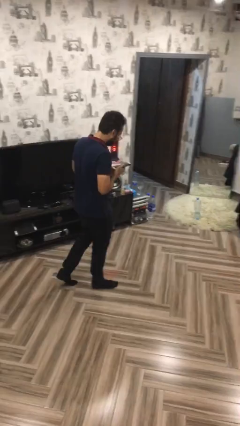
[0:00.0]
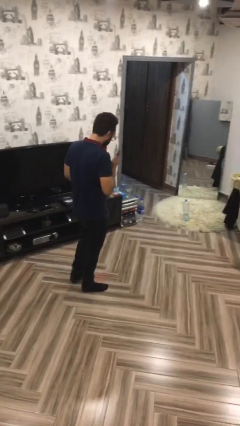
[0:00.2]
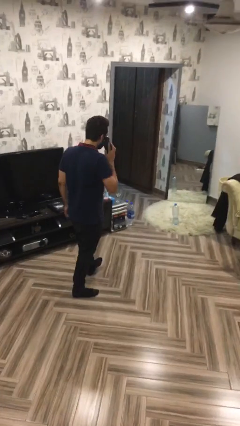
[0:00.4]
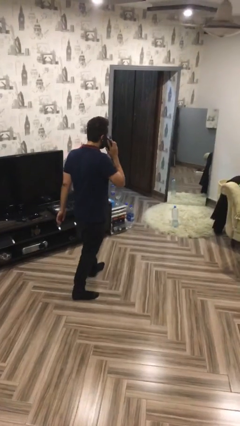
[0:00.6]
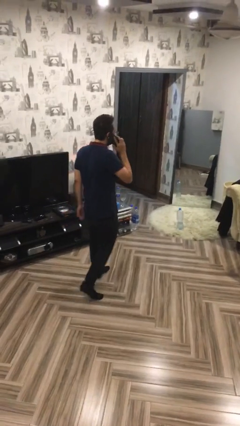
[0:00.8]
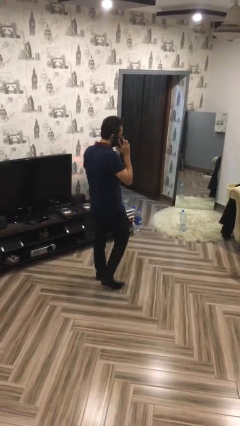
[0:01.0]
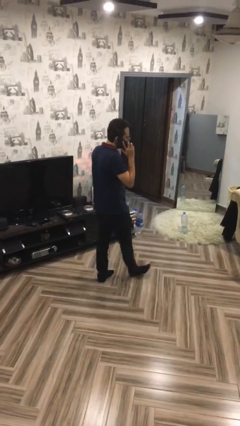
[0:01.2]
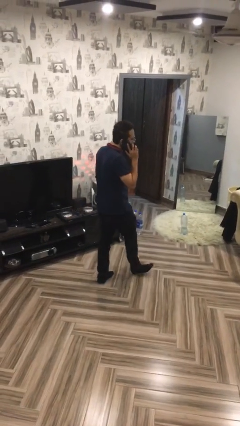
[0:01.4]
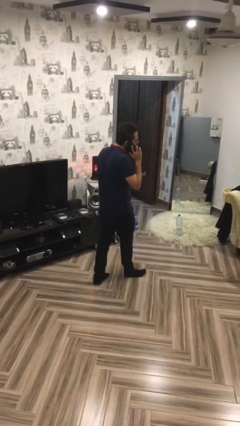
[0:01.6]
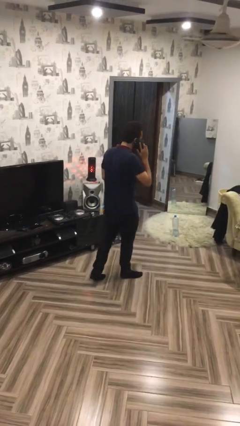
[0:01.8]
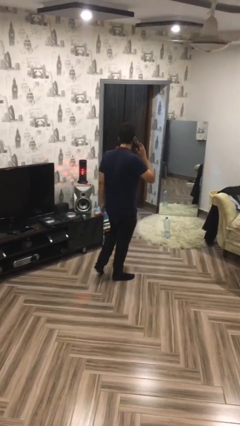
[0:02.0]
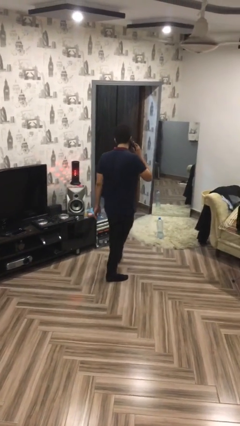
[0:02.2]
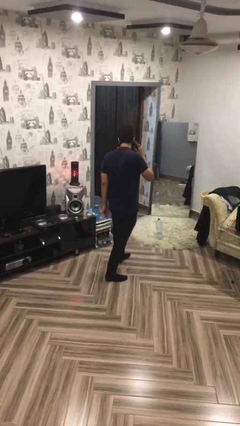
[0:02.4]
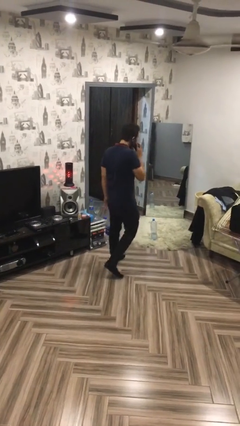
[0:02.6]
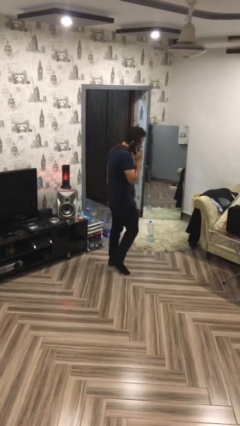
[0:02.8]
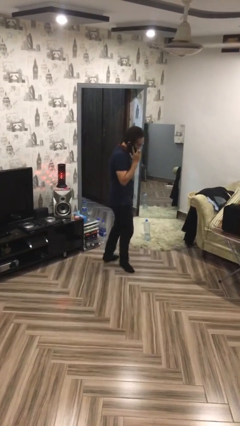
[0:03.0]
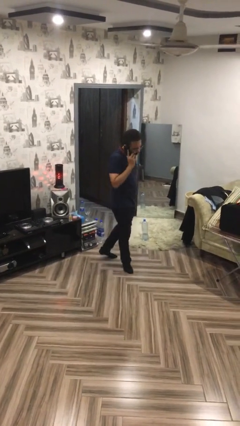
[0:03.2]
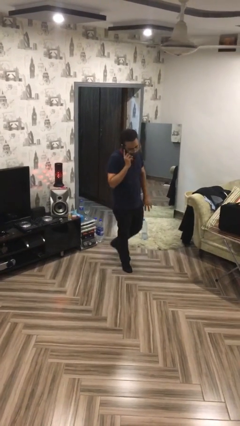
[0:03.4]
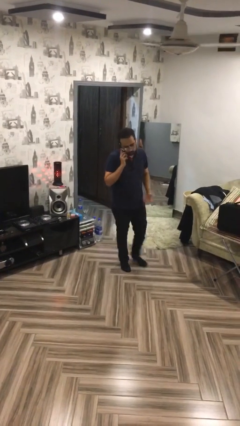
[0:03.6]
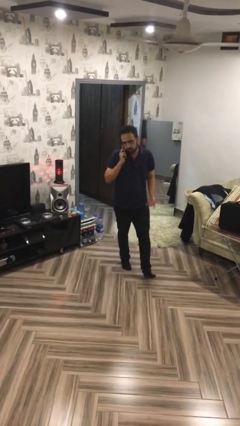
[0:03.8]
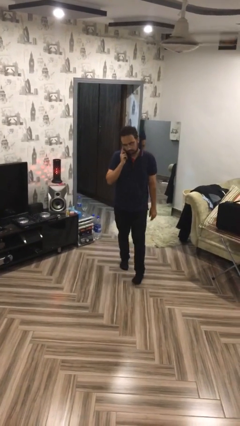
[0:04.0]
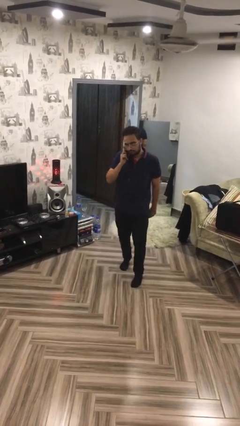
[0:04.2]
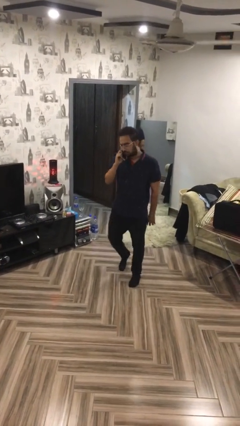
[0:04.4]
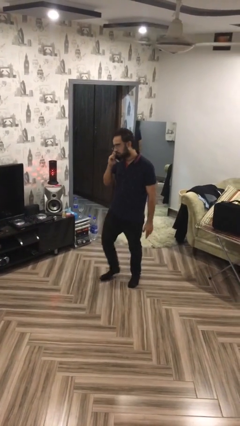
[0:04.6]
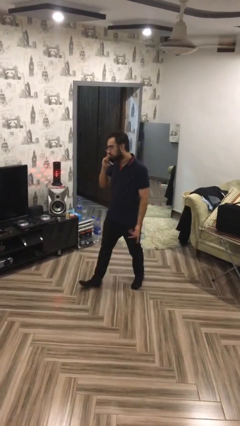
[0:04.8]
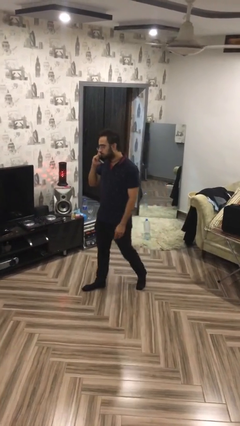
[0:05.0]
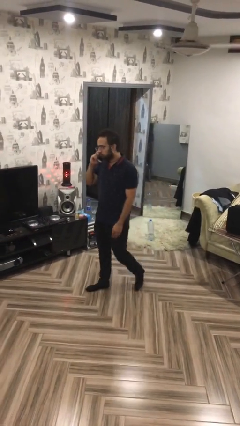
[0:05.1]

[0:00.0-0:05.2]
person talks on phone

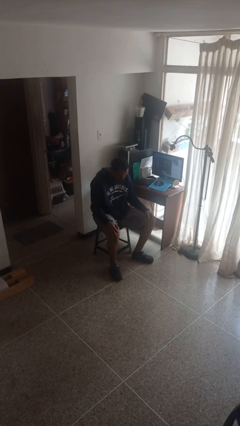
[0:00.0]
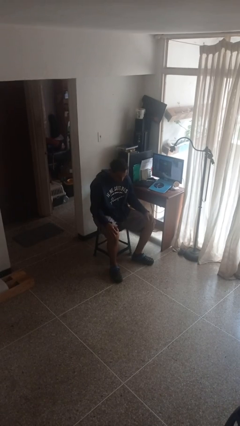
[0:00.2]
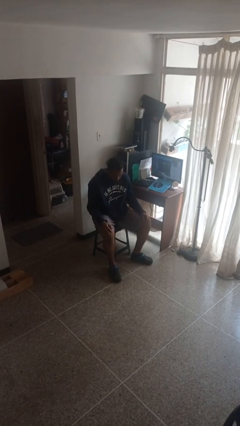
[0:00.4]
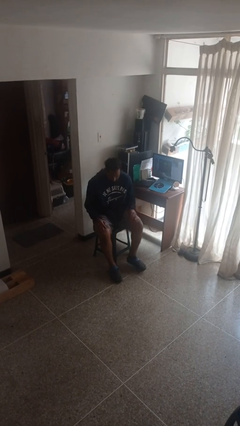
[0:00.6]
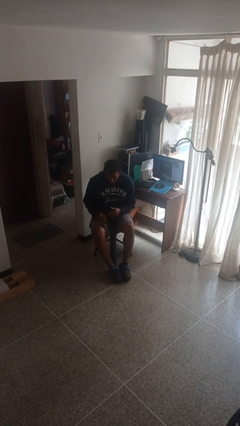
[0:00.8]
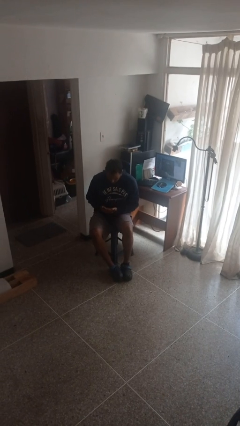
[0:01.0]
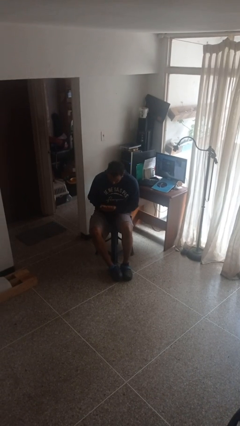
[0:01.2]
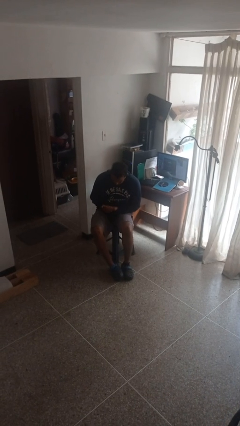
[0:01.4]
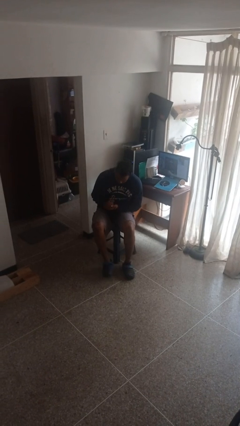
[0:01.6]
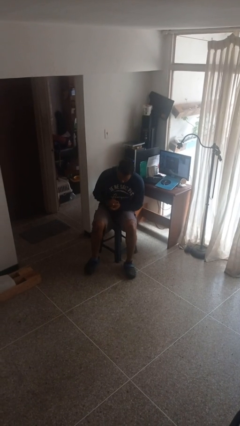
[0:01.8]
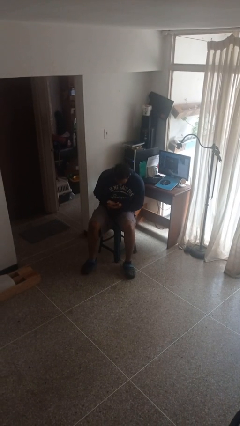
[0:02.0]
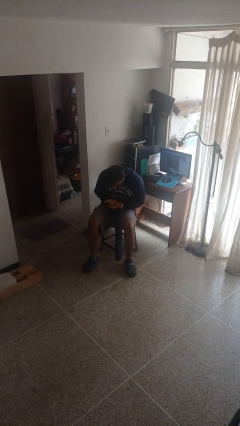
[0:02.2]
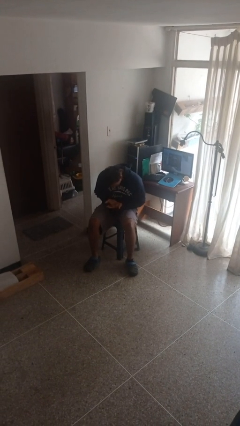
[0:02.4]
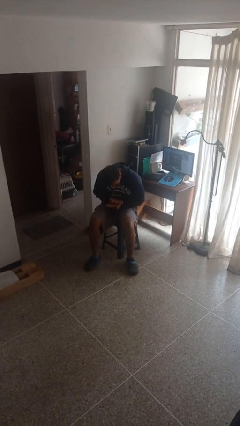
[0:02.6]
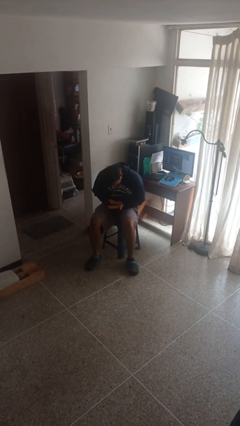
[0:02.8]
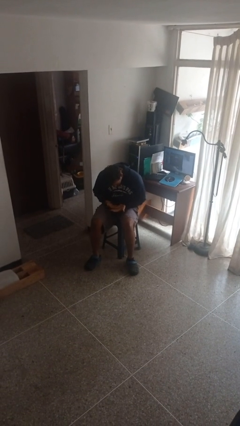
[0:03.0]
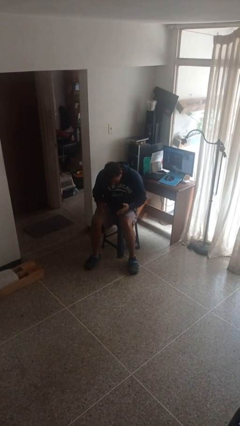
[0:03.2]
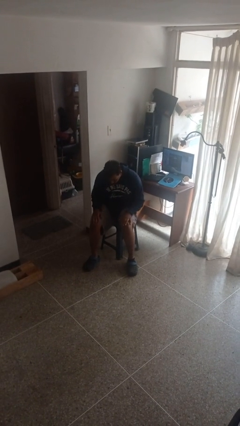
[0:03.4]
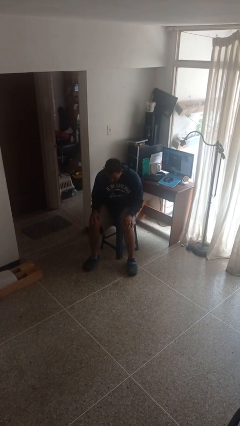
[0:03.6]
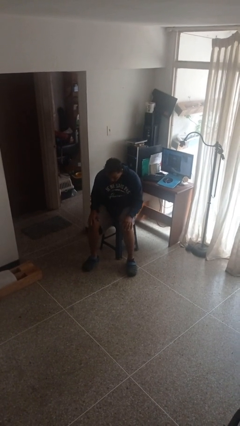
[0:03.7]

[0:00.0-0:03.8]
person looks at hands in lap

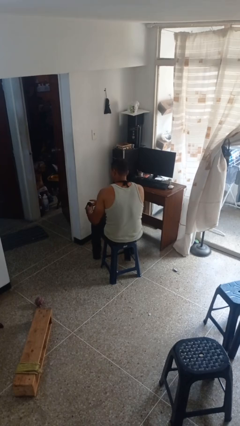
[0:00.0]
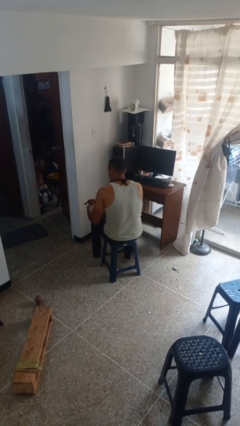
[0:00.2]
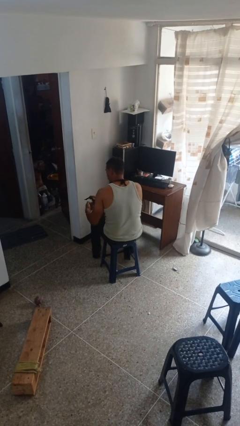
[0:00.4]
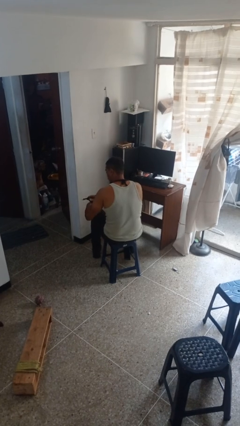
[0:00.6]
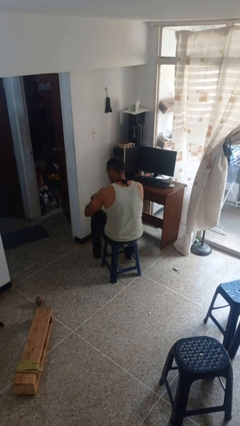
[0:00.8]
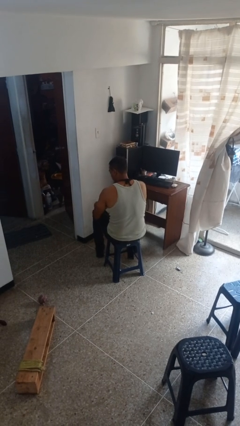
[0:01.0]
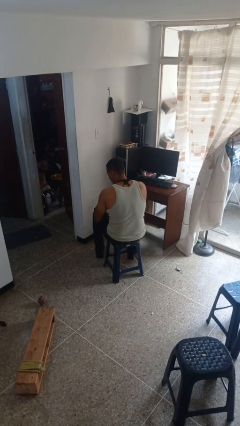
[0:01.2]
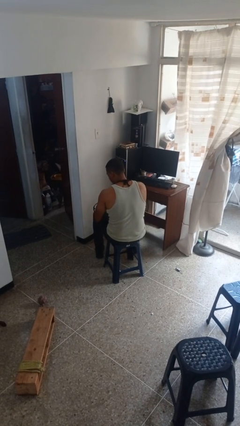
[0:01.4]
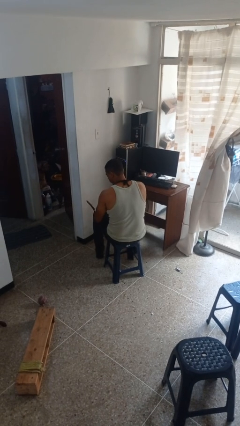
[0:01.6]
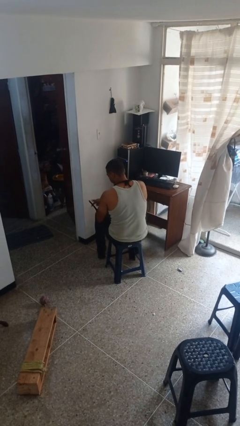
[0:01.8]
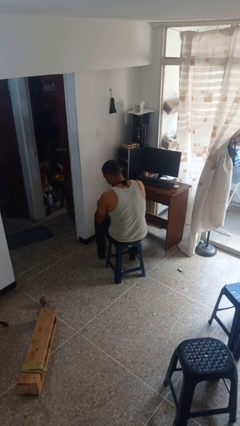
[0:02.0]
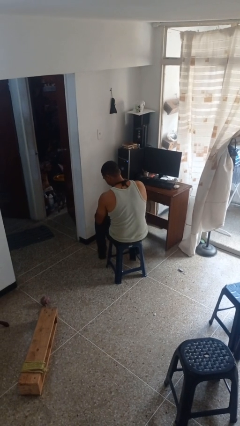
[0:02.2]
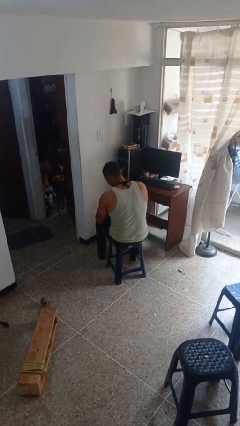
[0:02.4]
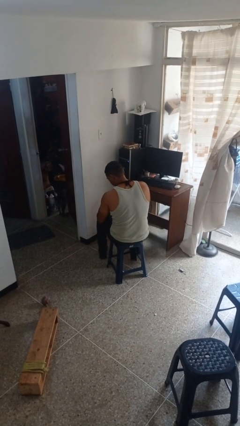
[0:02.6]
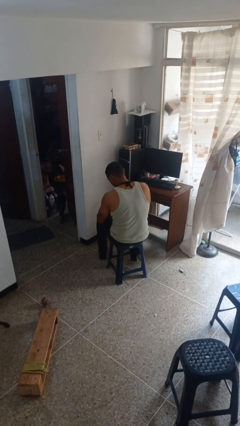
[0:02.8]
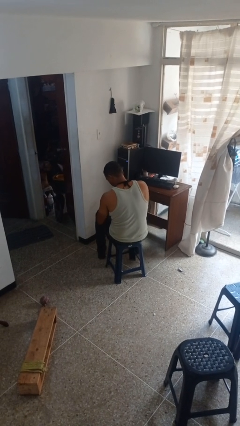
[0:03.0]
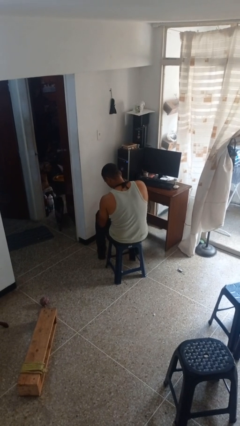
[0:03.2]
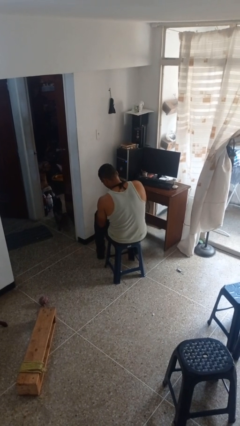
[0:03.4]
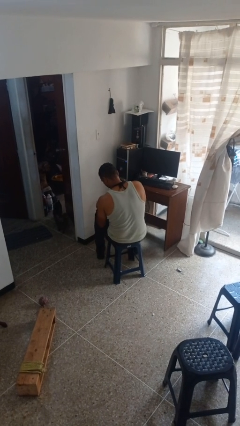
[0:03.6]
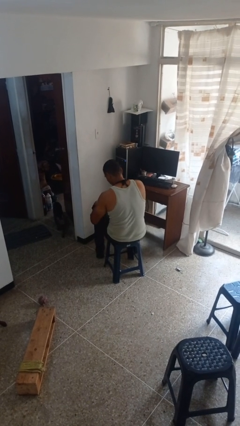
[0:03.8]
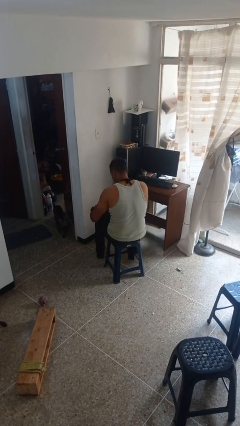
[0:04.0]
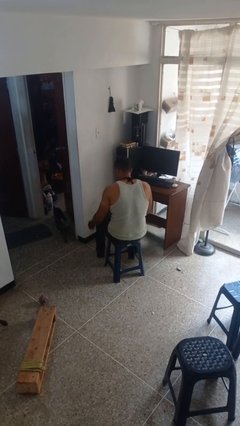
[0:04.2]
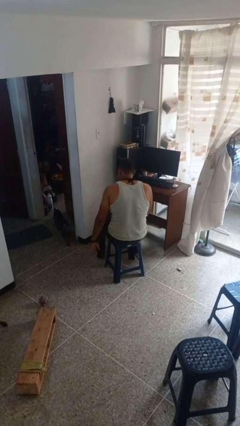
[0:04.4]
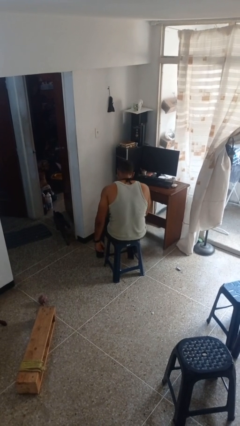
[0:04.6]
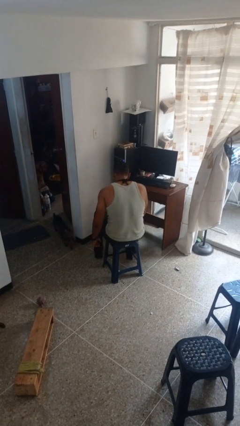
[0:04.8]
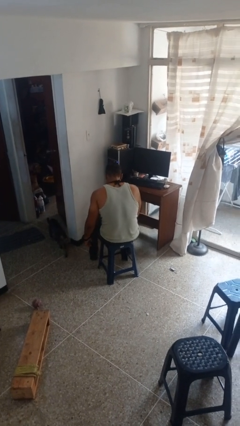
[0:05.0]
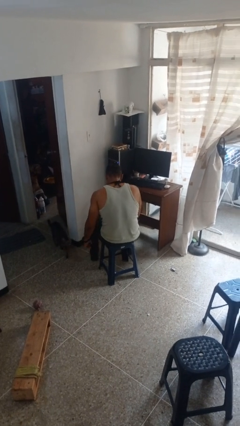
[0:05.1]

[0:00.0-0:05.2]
person puts on wristwatch

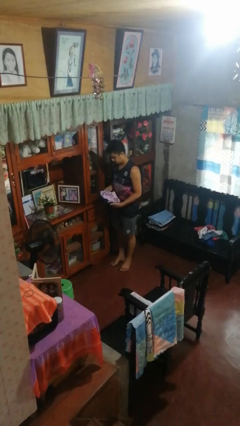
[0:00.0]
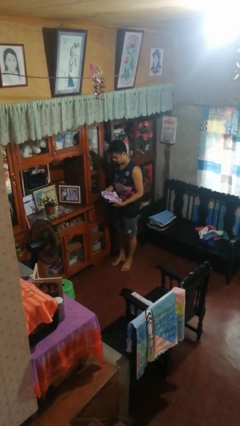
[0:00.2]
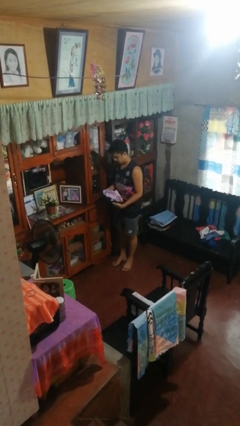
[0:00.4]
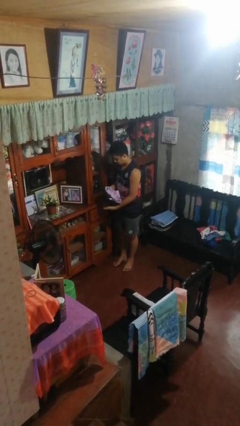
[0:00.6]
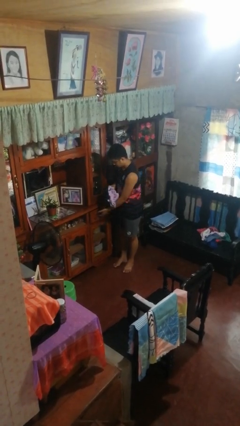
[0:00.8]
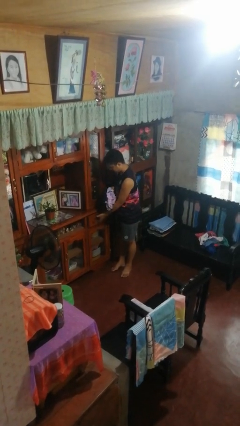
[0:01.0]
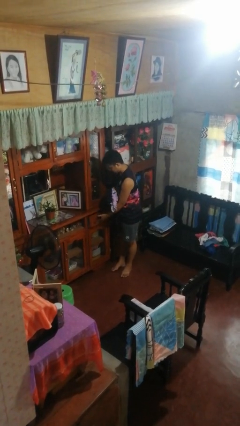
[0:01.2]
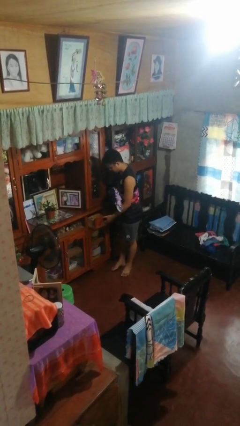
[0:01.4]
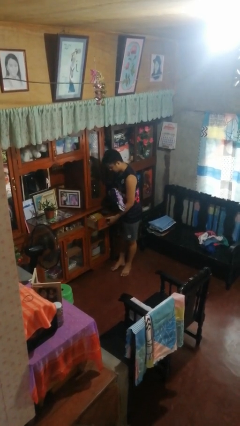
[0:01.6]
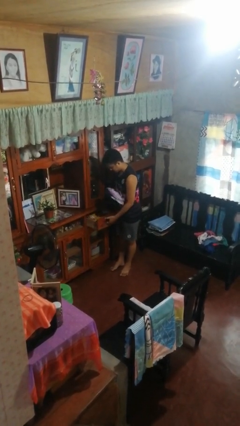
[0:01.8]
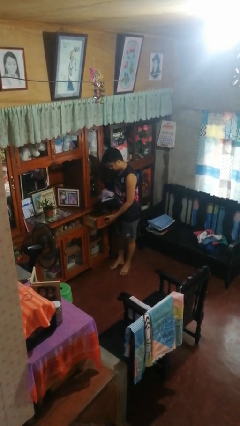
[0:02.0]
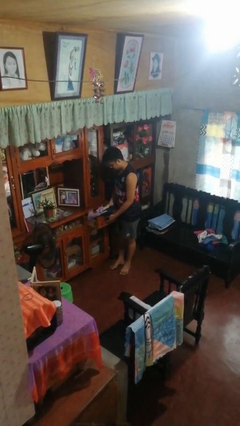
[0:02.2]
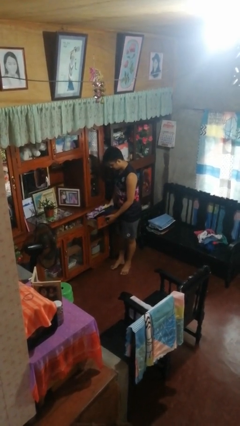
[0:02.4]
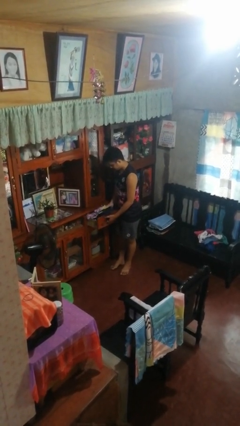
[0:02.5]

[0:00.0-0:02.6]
person puts clothes into dresser

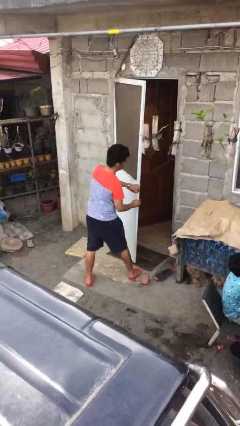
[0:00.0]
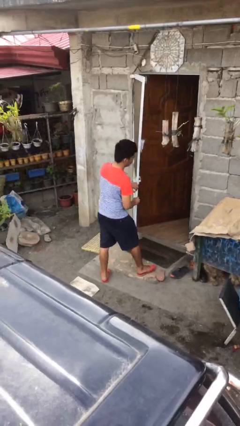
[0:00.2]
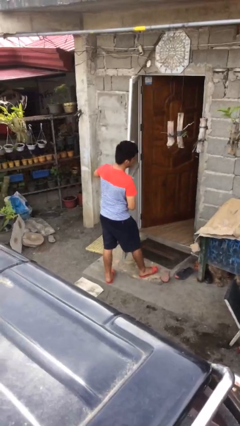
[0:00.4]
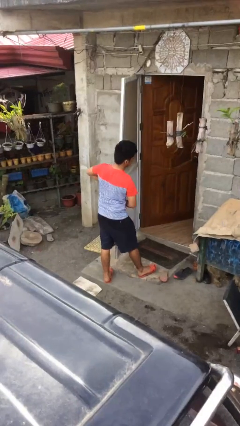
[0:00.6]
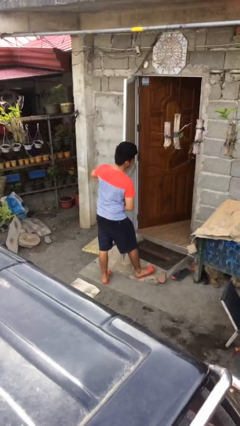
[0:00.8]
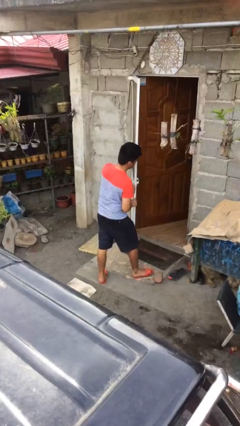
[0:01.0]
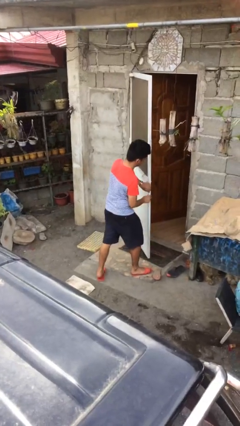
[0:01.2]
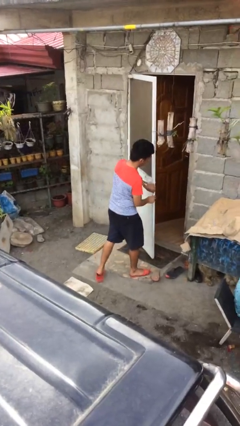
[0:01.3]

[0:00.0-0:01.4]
person opens facility door
